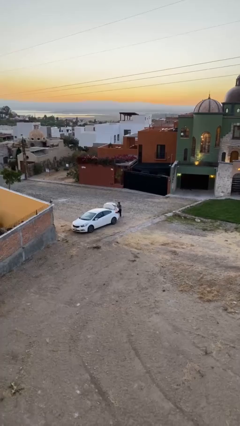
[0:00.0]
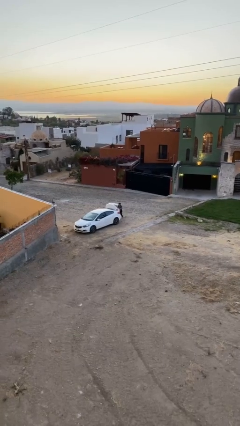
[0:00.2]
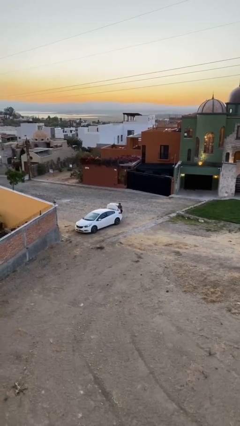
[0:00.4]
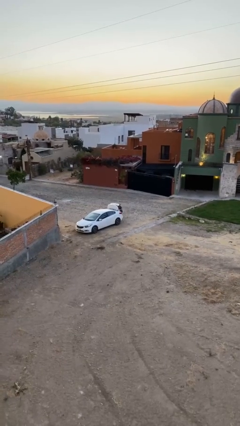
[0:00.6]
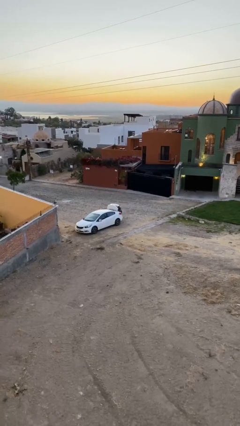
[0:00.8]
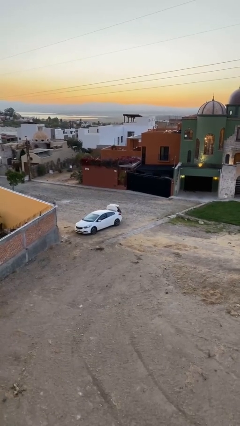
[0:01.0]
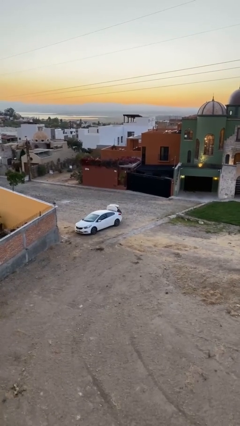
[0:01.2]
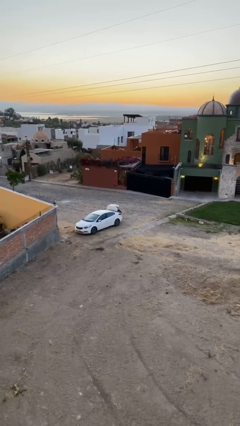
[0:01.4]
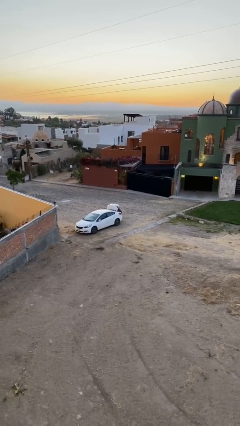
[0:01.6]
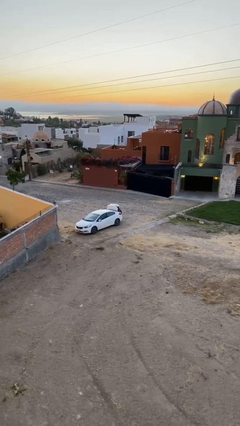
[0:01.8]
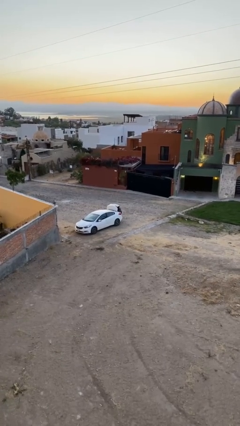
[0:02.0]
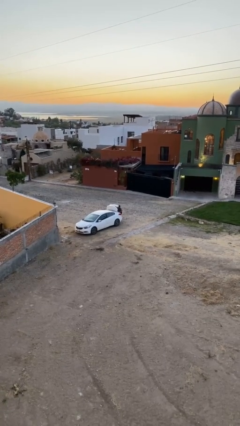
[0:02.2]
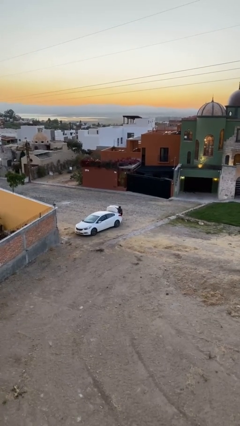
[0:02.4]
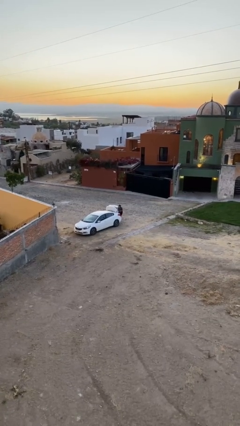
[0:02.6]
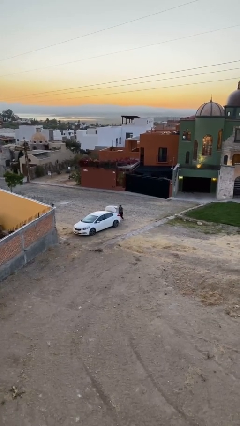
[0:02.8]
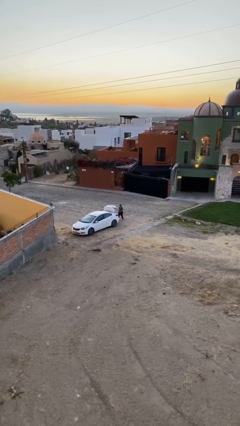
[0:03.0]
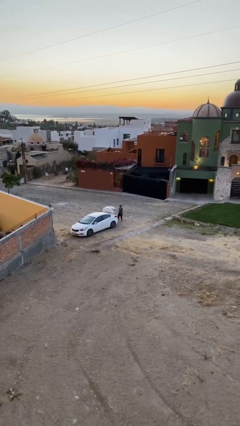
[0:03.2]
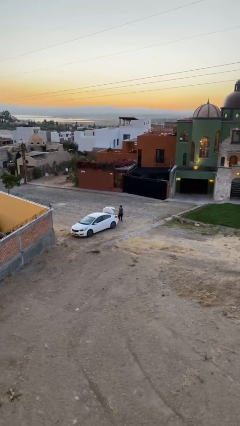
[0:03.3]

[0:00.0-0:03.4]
person loads car

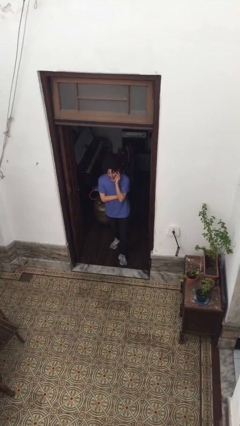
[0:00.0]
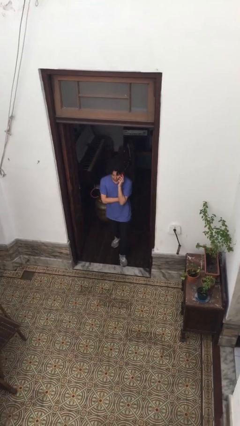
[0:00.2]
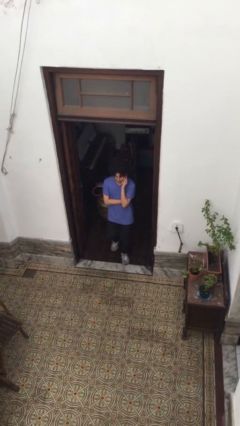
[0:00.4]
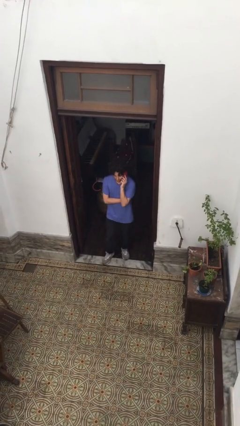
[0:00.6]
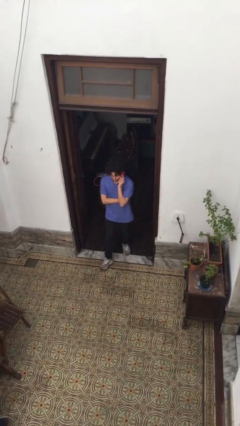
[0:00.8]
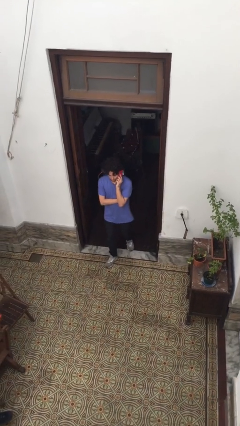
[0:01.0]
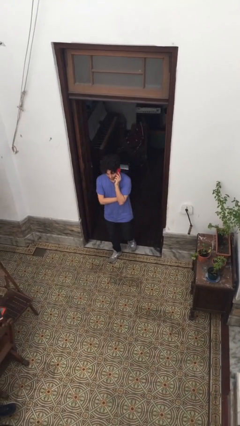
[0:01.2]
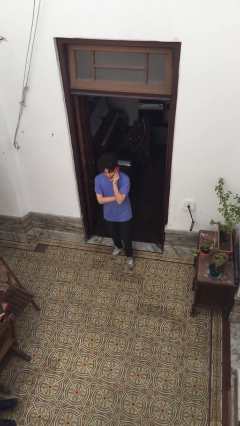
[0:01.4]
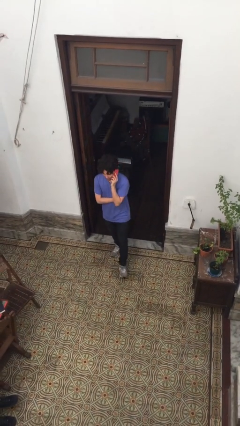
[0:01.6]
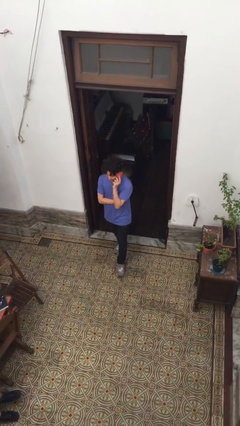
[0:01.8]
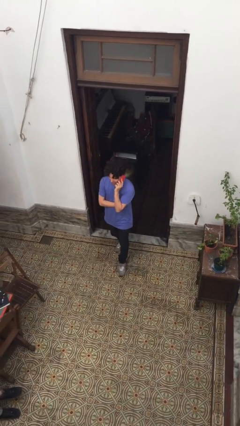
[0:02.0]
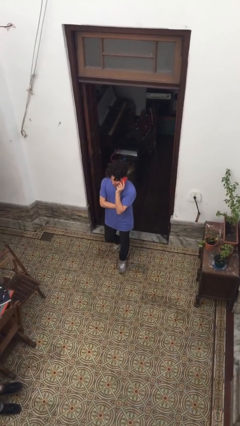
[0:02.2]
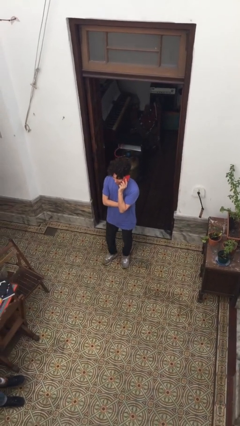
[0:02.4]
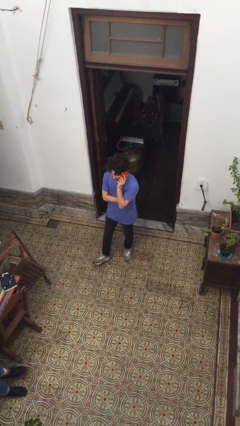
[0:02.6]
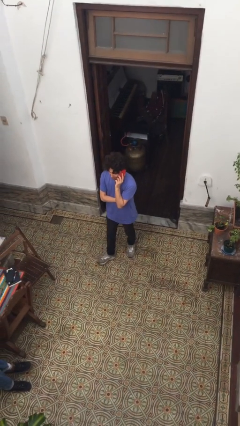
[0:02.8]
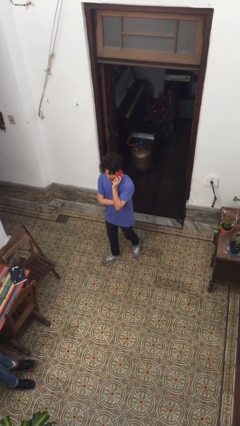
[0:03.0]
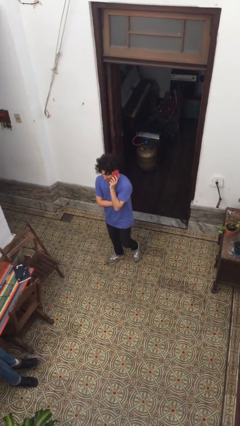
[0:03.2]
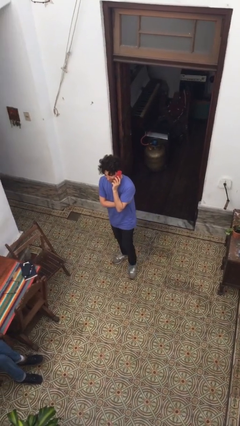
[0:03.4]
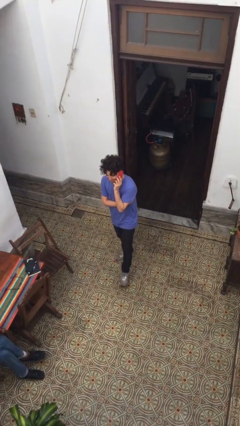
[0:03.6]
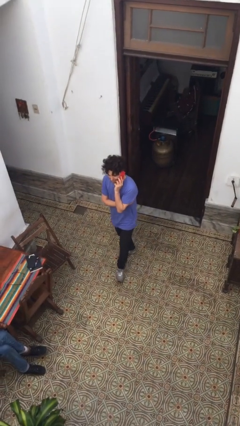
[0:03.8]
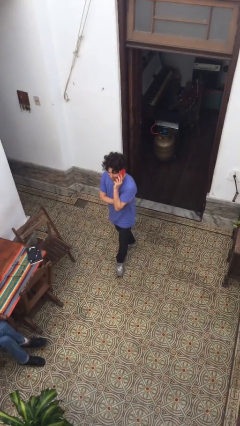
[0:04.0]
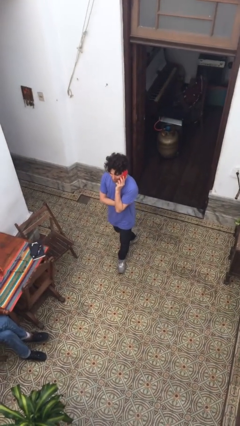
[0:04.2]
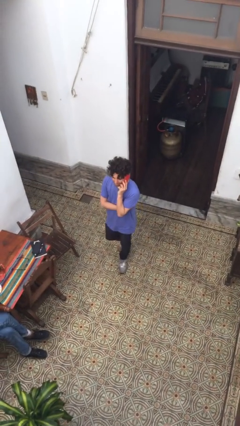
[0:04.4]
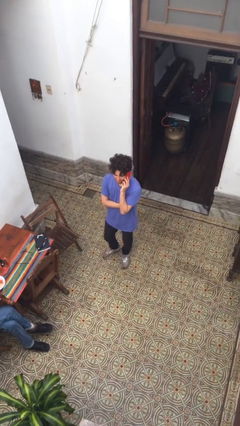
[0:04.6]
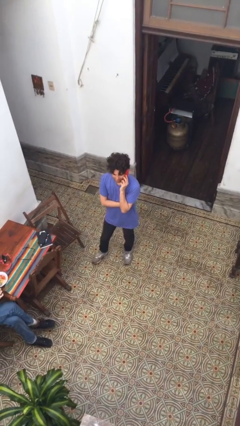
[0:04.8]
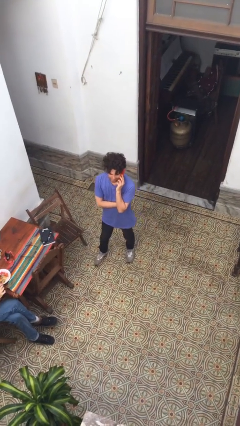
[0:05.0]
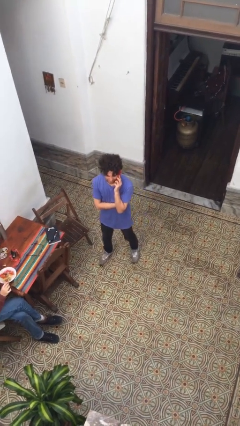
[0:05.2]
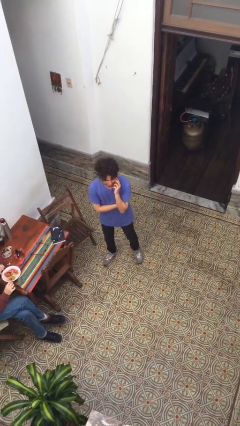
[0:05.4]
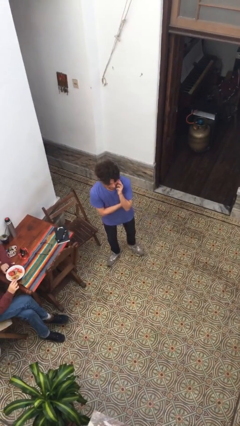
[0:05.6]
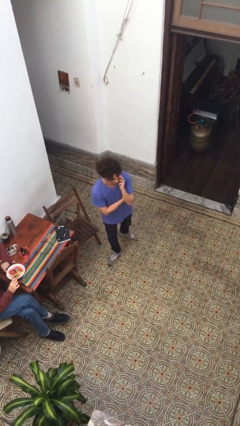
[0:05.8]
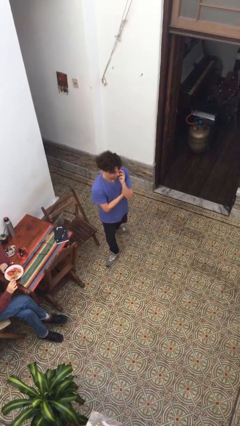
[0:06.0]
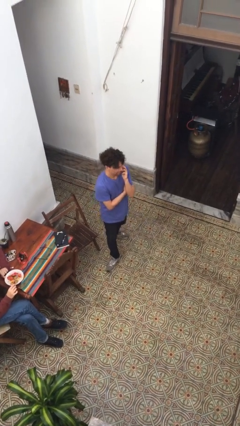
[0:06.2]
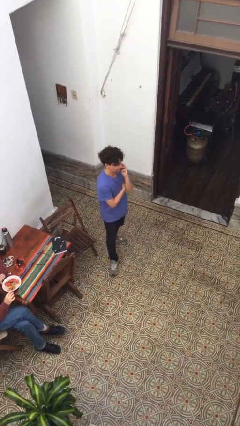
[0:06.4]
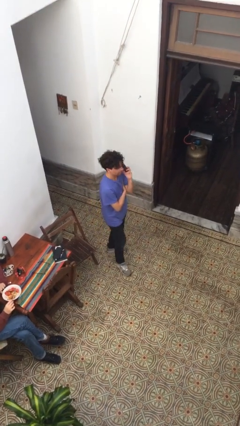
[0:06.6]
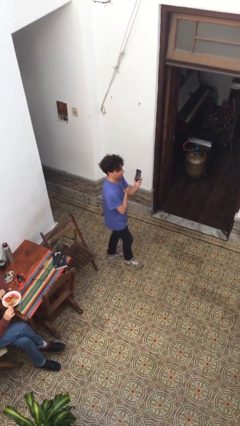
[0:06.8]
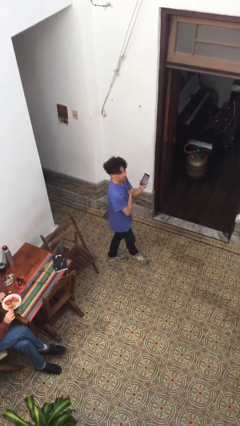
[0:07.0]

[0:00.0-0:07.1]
person enters scene through structure

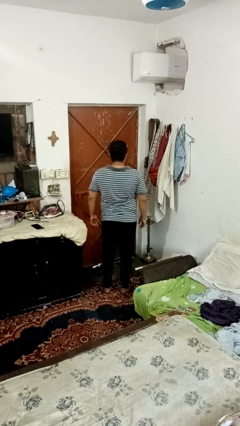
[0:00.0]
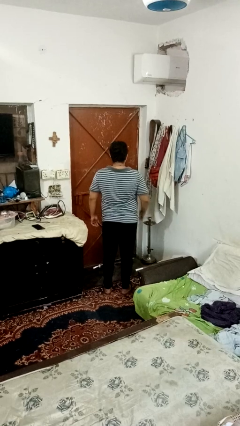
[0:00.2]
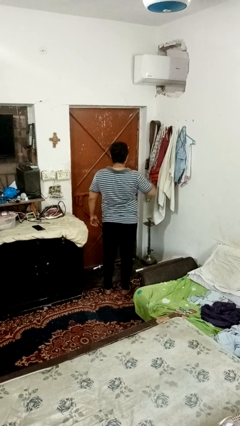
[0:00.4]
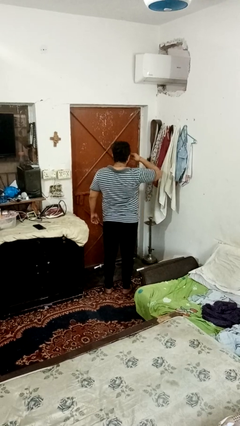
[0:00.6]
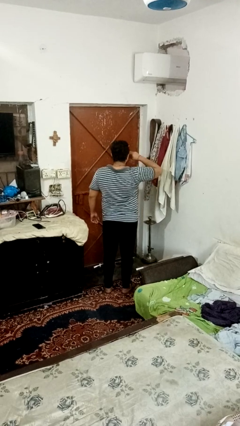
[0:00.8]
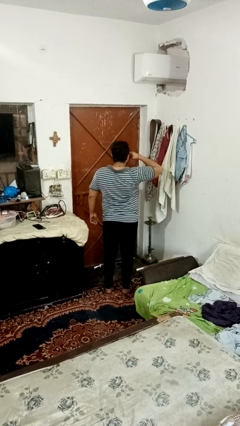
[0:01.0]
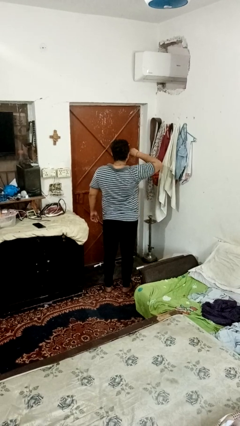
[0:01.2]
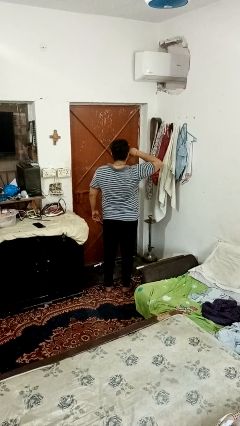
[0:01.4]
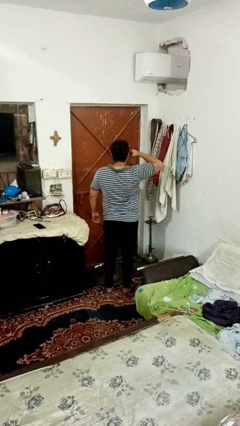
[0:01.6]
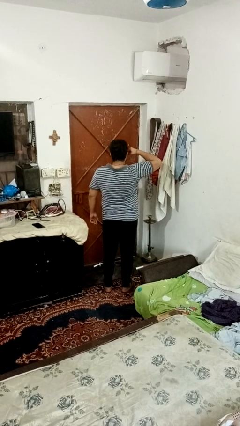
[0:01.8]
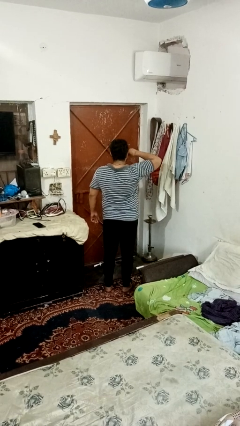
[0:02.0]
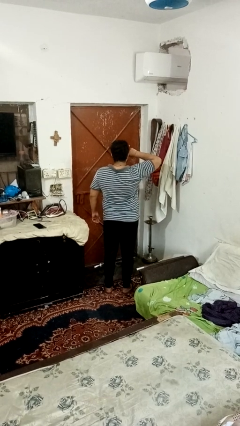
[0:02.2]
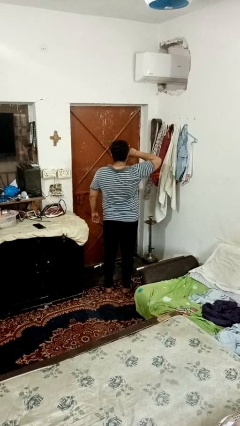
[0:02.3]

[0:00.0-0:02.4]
person rubs eyes

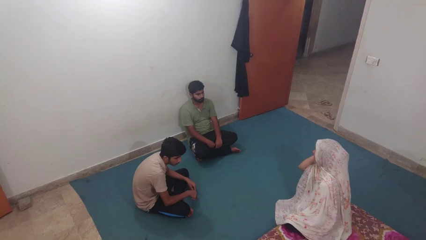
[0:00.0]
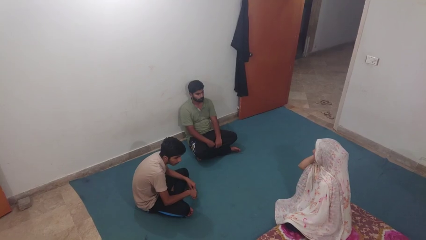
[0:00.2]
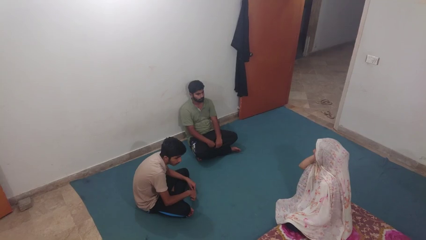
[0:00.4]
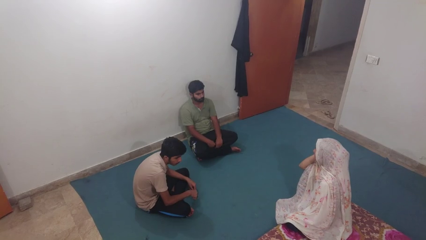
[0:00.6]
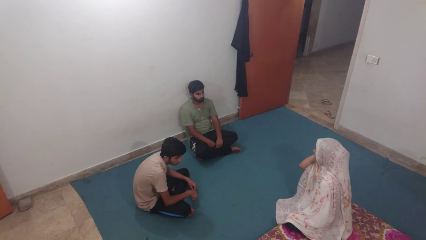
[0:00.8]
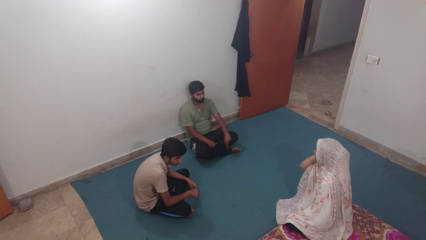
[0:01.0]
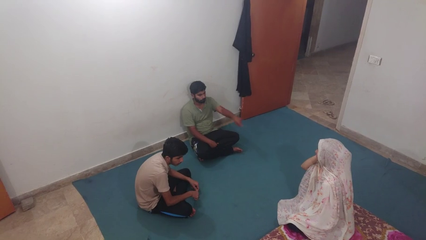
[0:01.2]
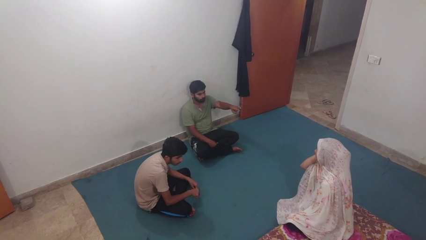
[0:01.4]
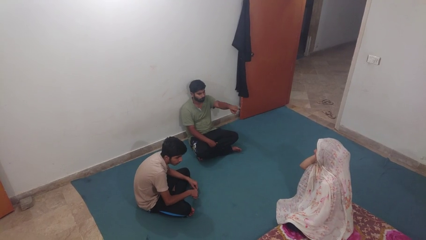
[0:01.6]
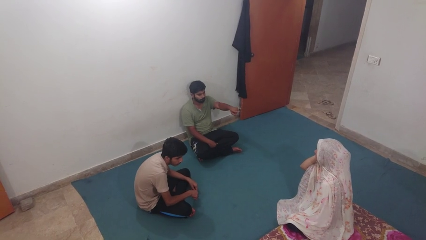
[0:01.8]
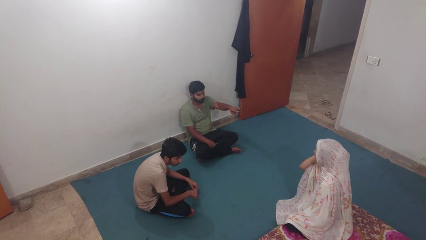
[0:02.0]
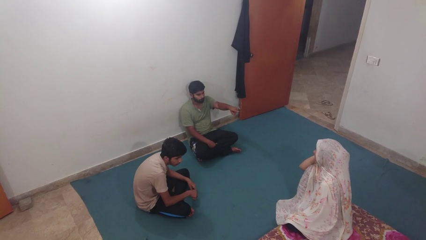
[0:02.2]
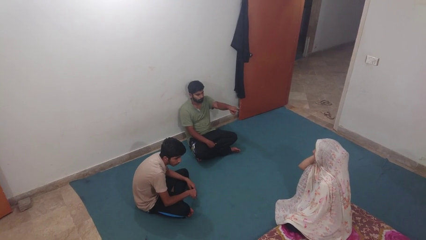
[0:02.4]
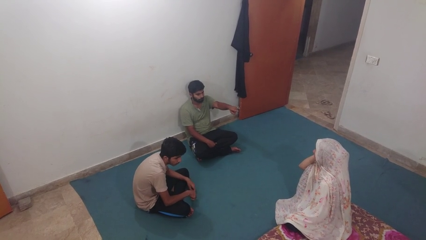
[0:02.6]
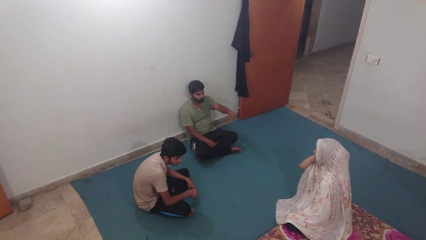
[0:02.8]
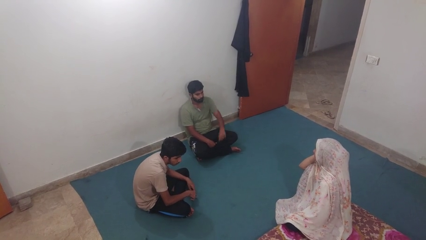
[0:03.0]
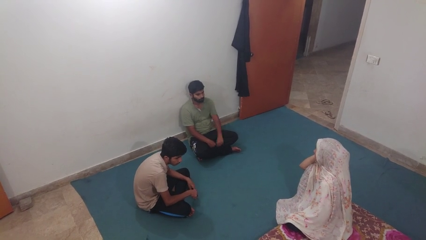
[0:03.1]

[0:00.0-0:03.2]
person points at person

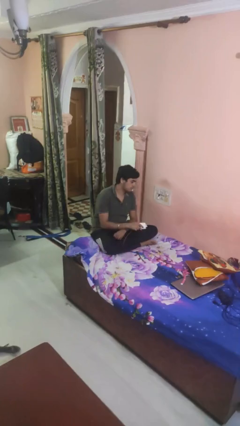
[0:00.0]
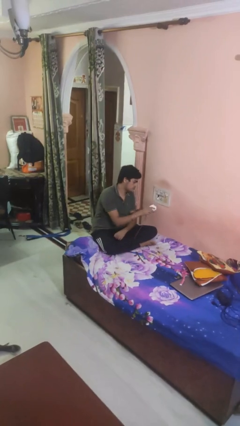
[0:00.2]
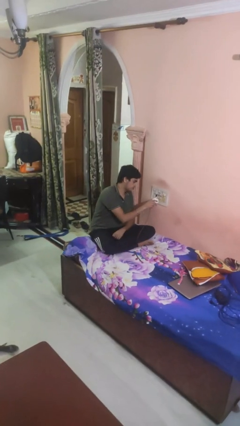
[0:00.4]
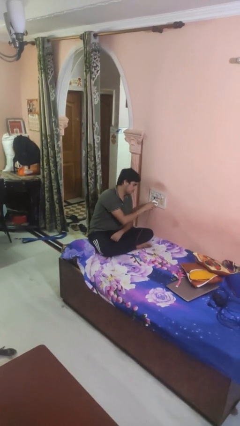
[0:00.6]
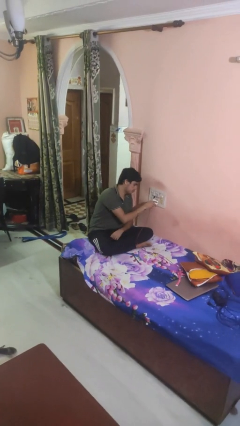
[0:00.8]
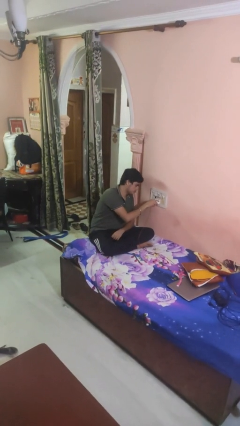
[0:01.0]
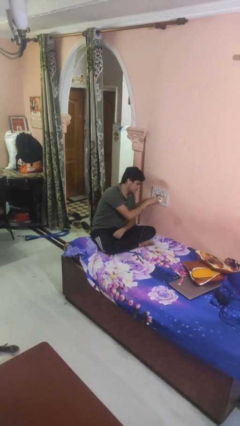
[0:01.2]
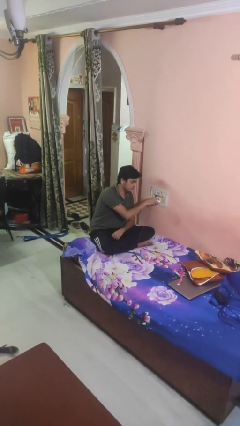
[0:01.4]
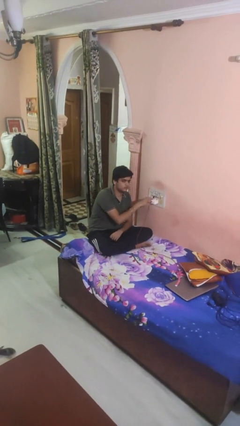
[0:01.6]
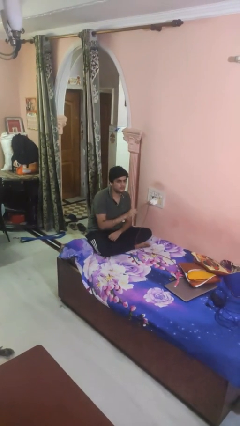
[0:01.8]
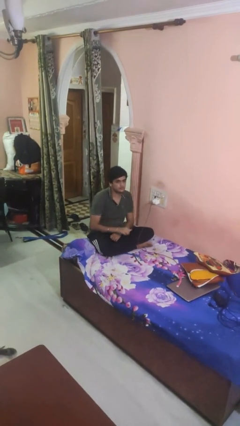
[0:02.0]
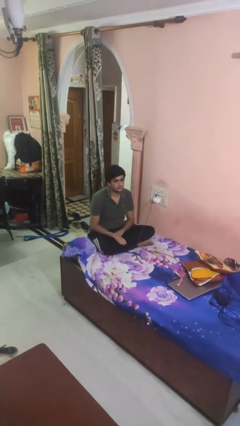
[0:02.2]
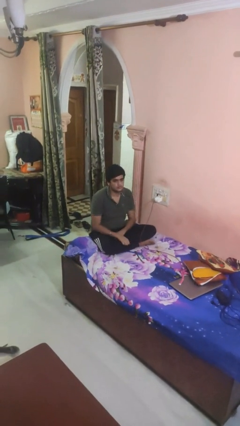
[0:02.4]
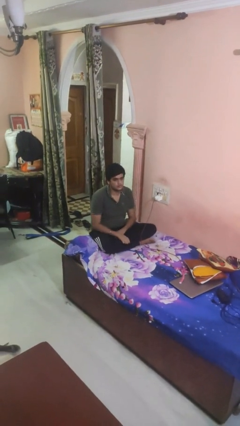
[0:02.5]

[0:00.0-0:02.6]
person plugs into electrical socket
